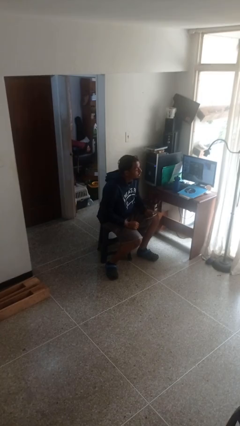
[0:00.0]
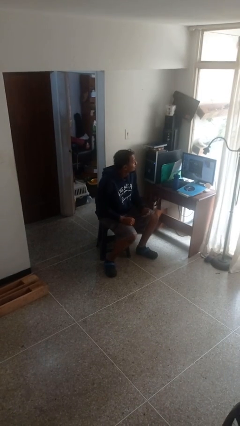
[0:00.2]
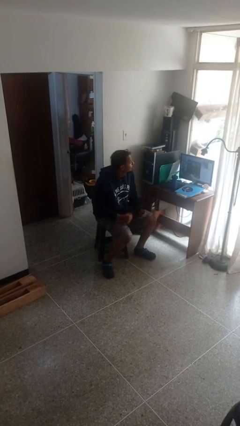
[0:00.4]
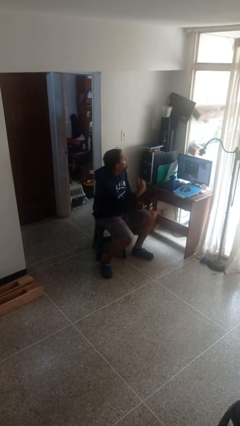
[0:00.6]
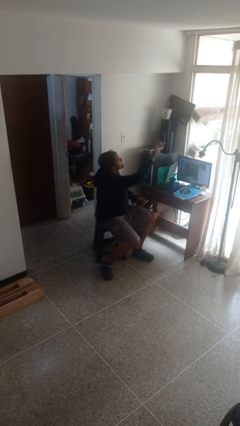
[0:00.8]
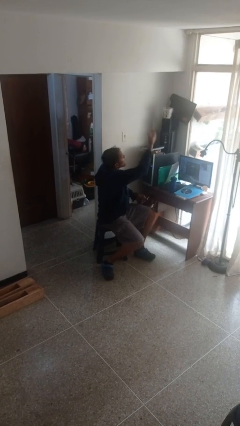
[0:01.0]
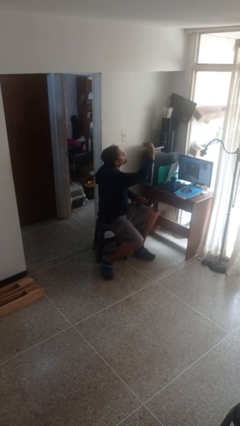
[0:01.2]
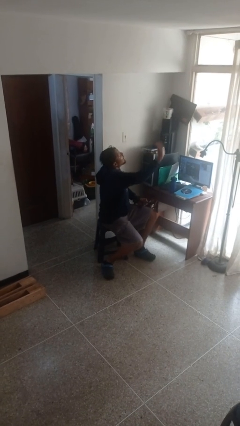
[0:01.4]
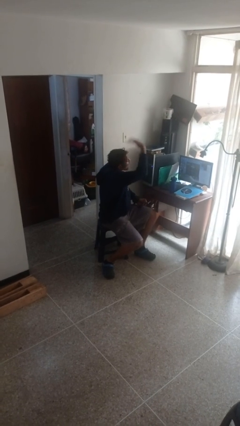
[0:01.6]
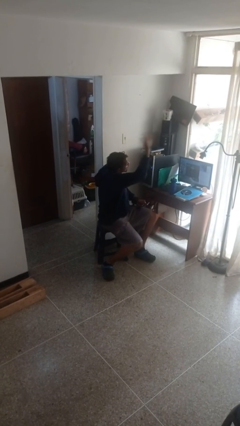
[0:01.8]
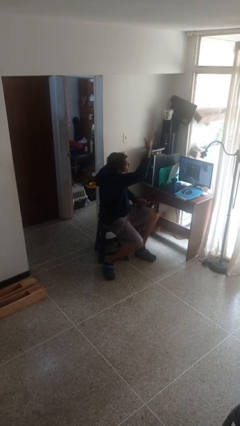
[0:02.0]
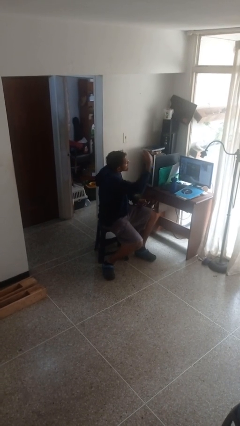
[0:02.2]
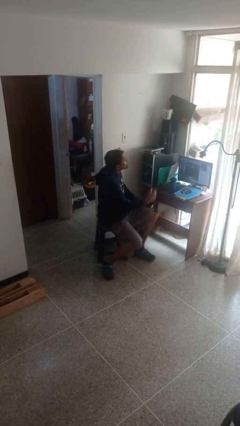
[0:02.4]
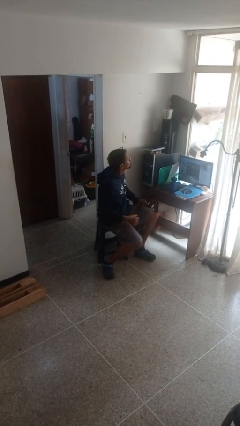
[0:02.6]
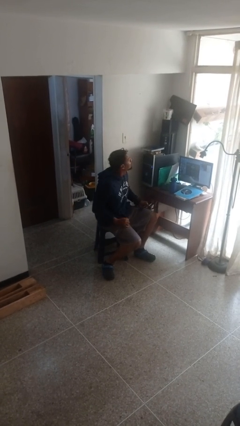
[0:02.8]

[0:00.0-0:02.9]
person gestures come here

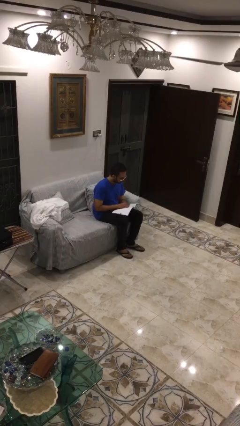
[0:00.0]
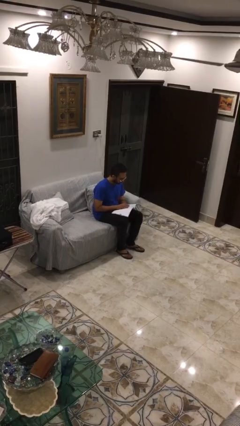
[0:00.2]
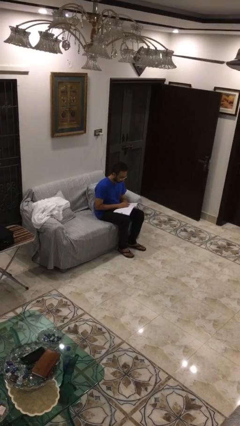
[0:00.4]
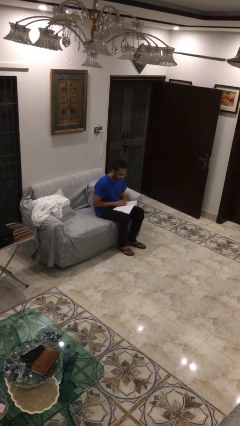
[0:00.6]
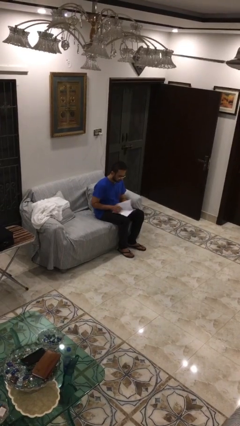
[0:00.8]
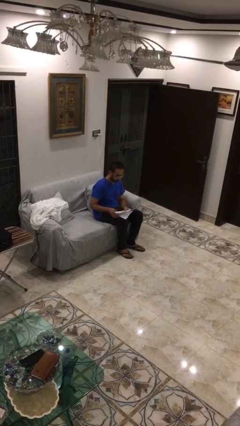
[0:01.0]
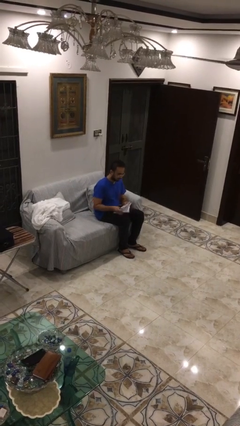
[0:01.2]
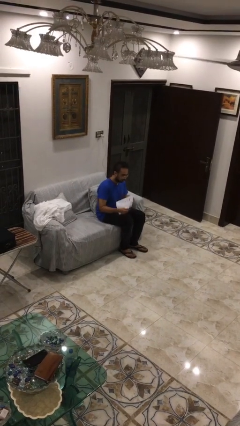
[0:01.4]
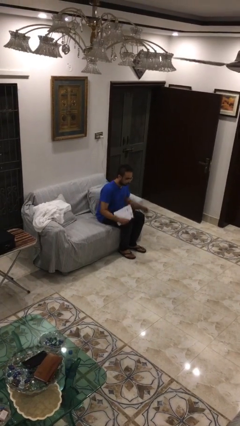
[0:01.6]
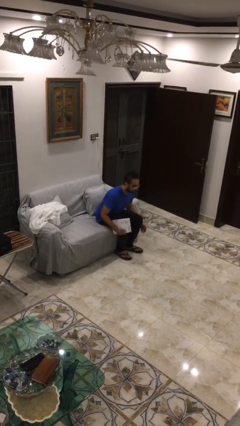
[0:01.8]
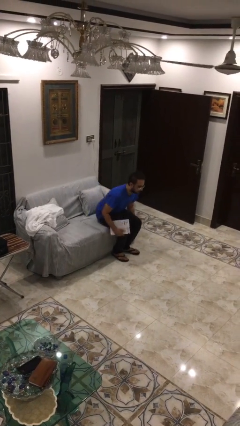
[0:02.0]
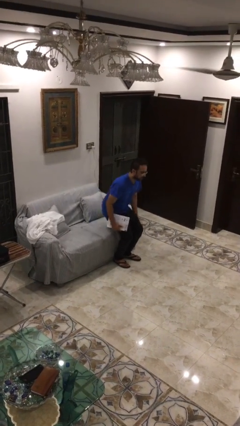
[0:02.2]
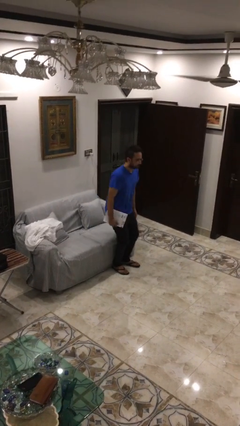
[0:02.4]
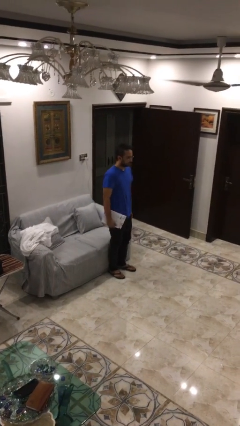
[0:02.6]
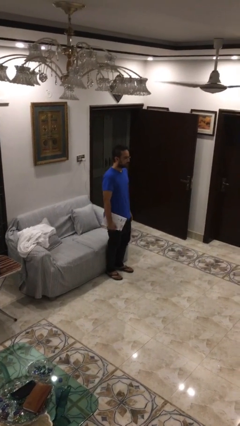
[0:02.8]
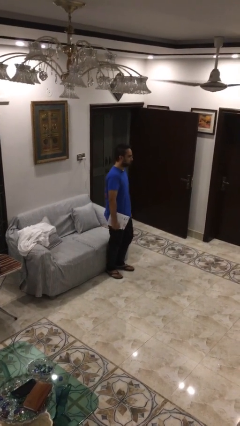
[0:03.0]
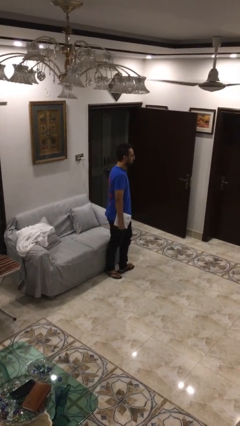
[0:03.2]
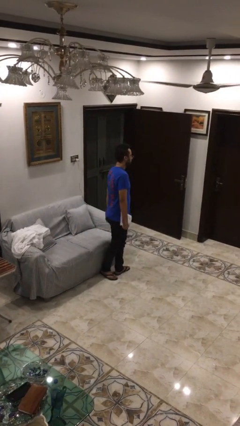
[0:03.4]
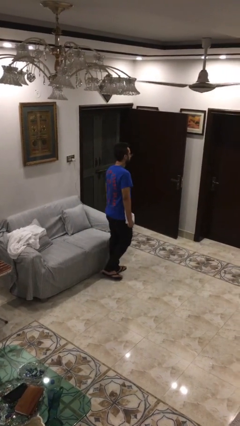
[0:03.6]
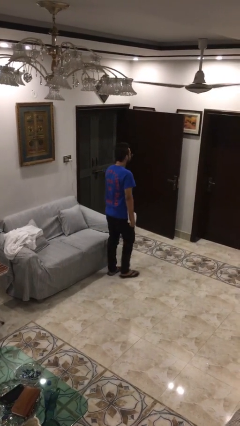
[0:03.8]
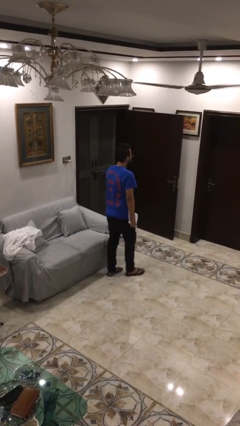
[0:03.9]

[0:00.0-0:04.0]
person stands up

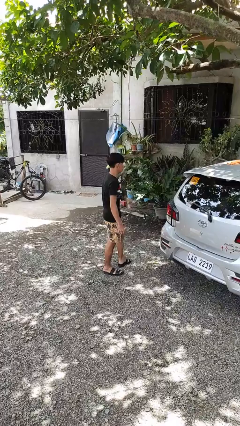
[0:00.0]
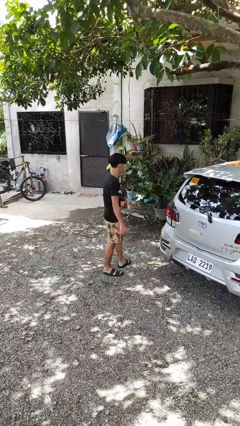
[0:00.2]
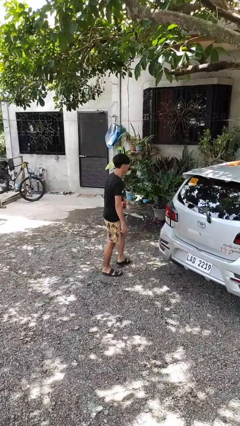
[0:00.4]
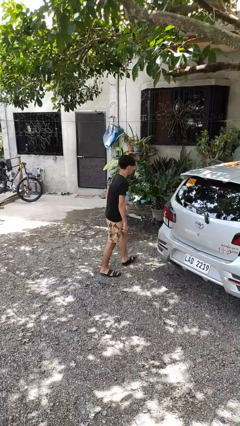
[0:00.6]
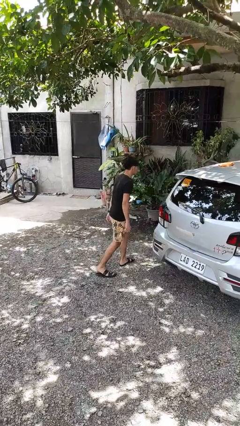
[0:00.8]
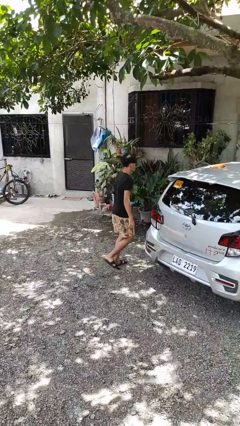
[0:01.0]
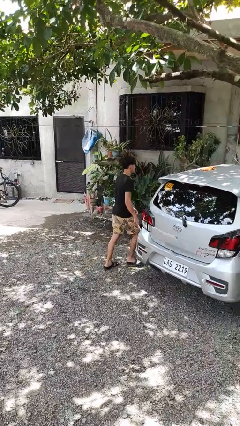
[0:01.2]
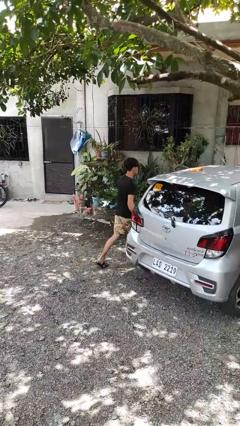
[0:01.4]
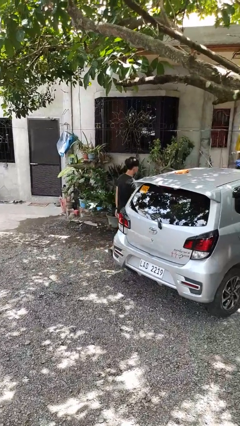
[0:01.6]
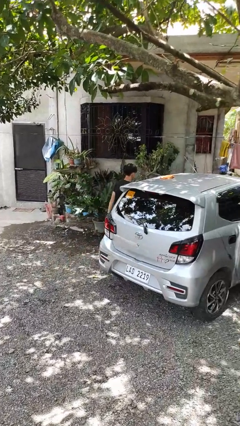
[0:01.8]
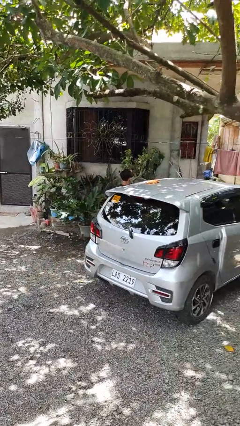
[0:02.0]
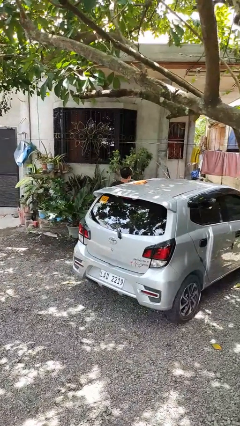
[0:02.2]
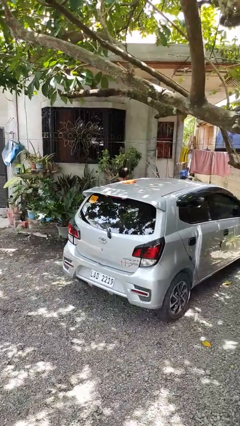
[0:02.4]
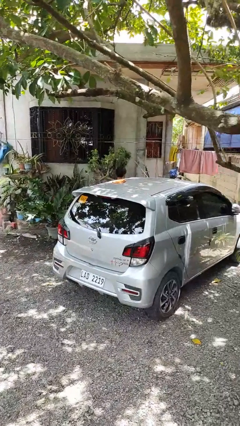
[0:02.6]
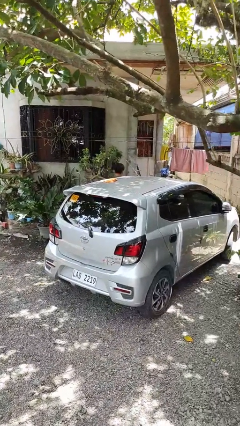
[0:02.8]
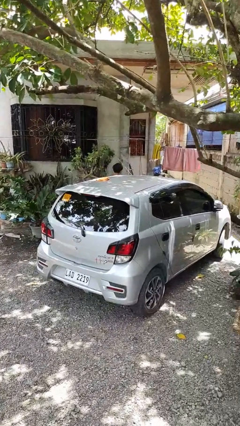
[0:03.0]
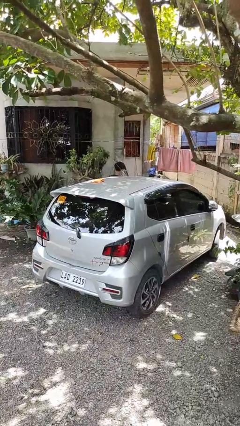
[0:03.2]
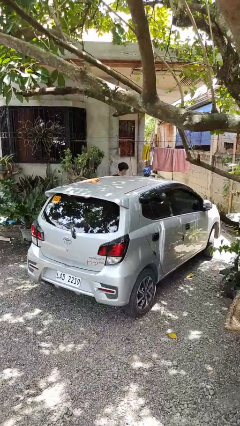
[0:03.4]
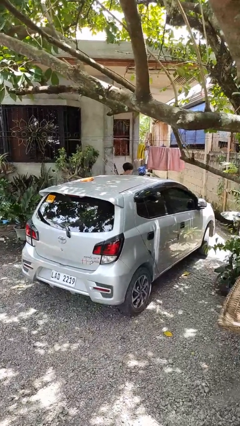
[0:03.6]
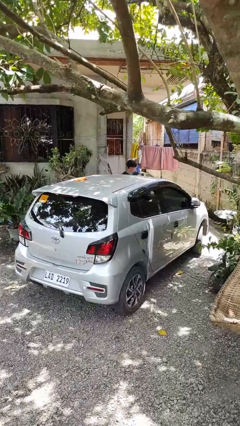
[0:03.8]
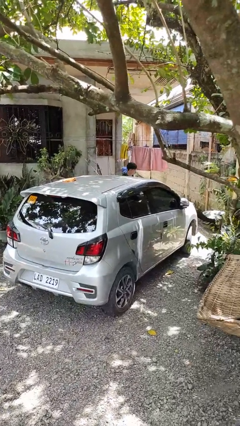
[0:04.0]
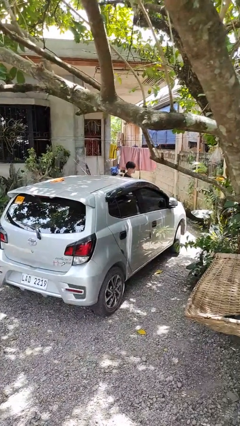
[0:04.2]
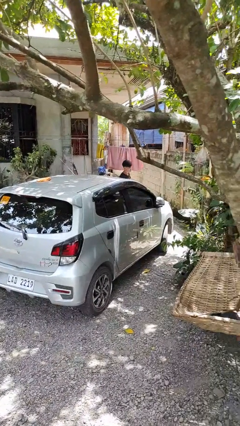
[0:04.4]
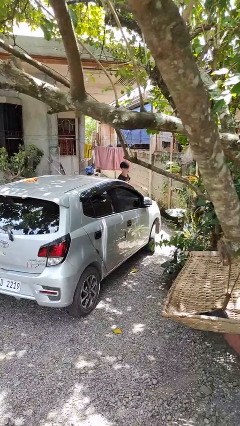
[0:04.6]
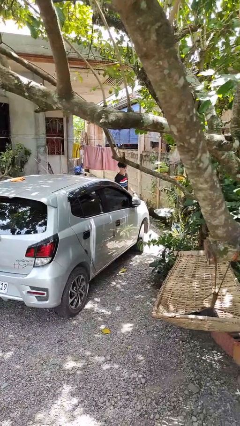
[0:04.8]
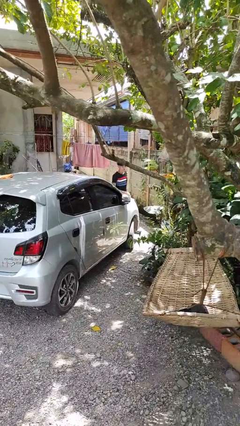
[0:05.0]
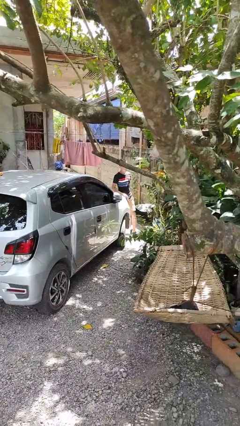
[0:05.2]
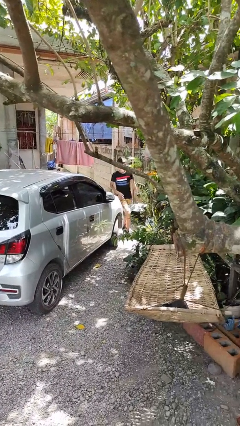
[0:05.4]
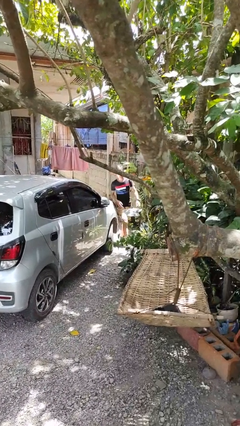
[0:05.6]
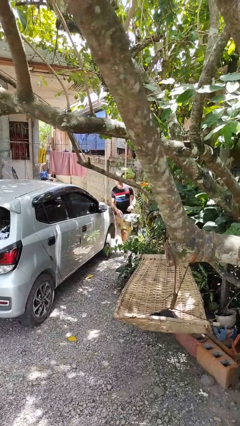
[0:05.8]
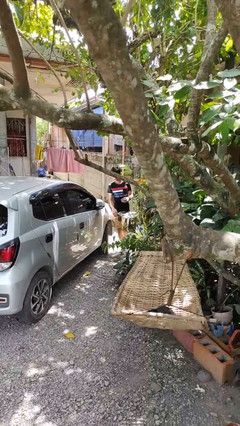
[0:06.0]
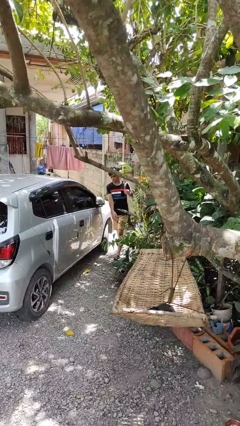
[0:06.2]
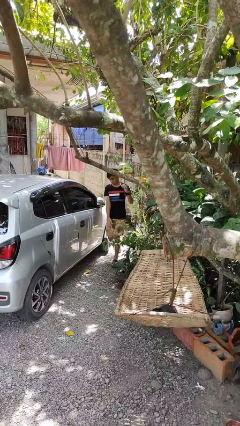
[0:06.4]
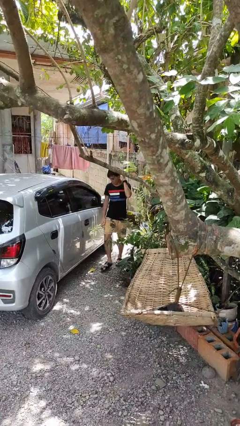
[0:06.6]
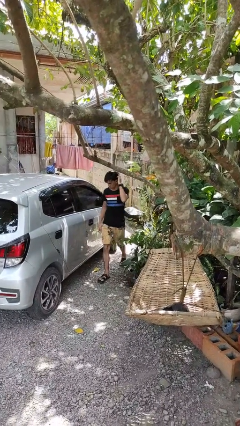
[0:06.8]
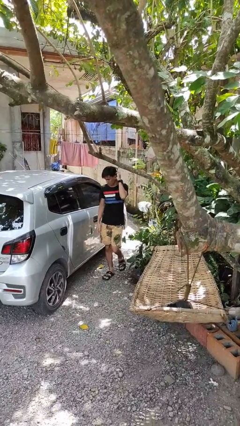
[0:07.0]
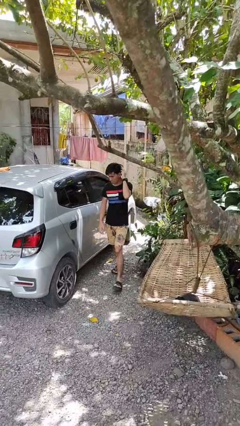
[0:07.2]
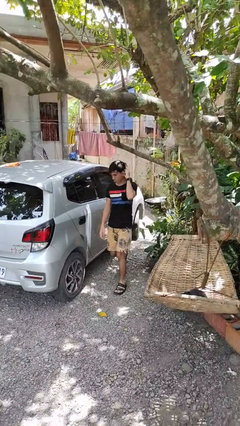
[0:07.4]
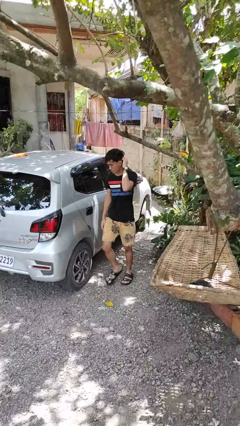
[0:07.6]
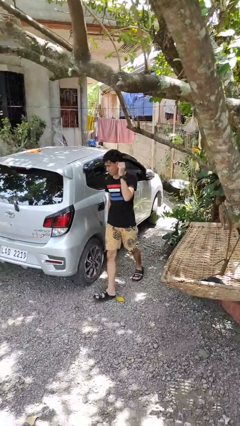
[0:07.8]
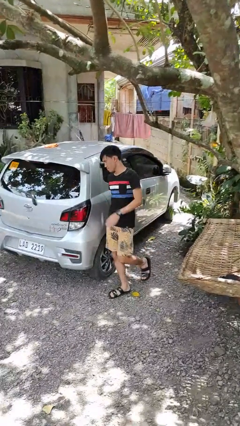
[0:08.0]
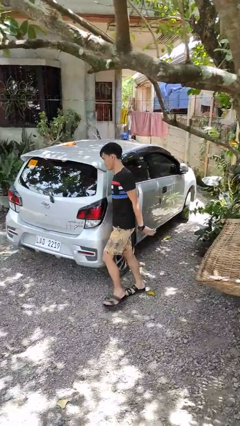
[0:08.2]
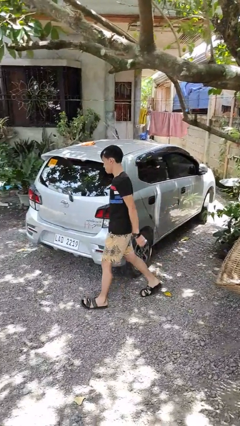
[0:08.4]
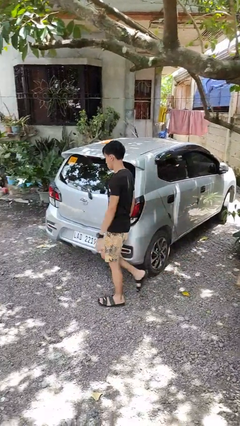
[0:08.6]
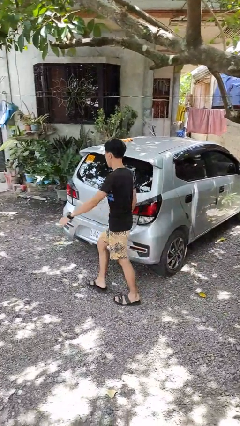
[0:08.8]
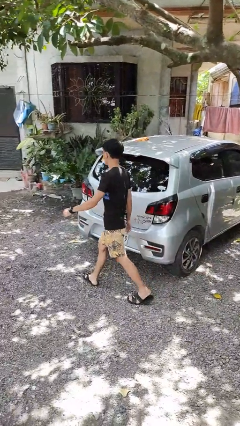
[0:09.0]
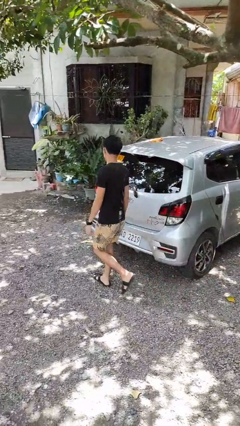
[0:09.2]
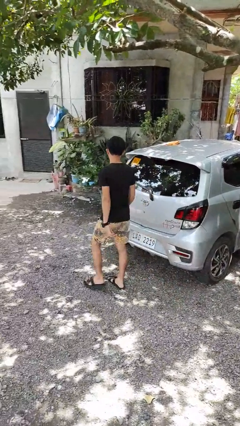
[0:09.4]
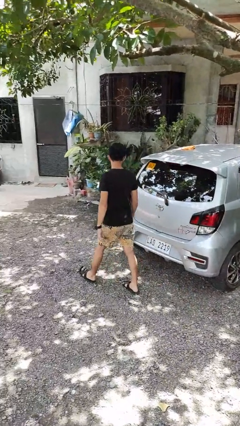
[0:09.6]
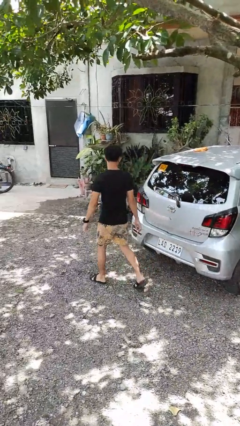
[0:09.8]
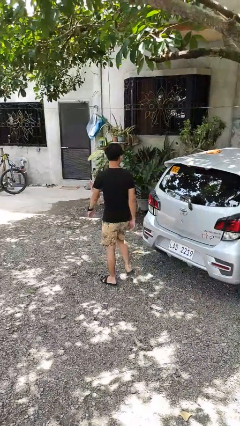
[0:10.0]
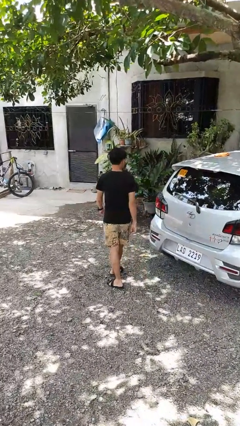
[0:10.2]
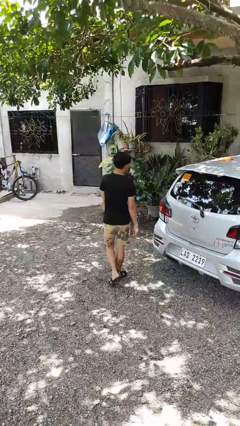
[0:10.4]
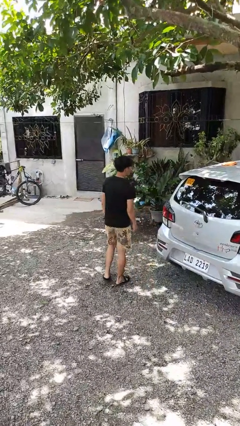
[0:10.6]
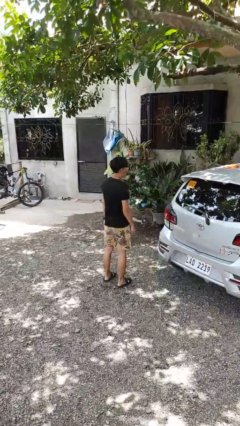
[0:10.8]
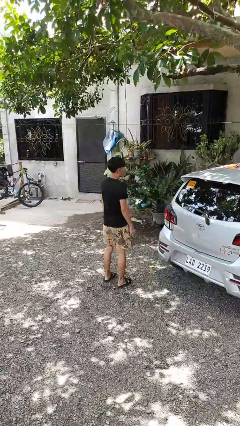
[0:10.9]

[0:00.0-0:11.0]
person walks around car

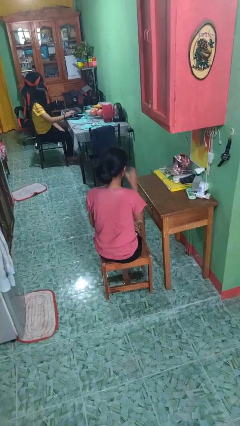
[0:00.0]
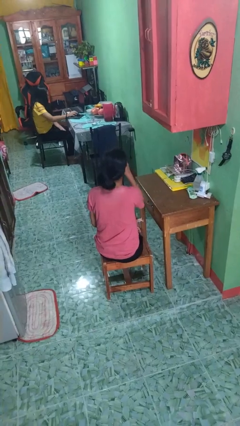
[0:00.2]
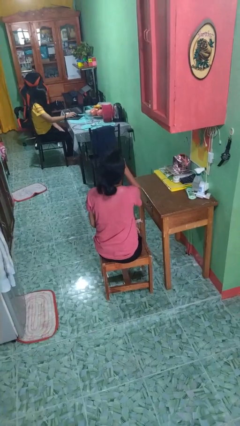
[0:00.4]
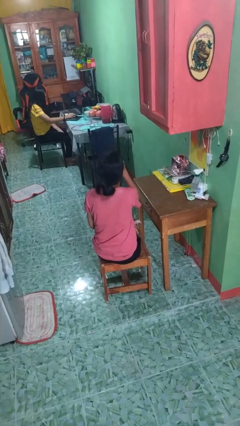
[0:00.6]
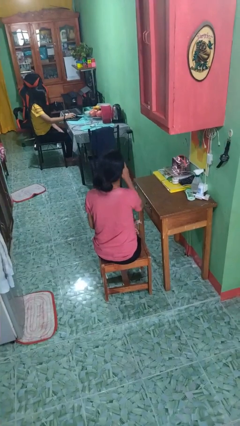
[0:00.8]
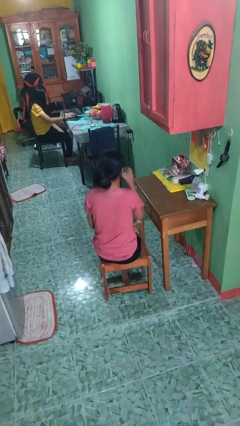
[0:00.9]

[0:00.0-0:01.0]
person drinks from shotglass
